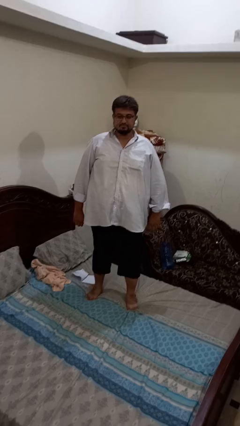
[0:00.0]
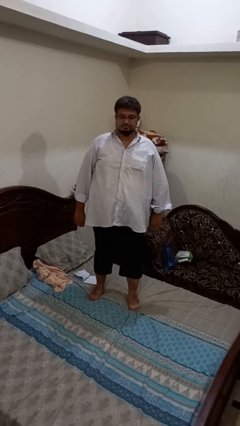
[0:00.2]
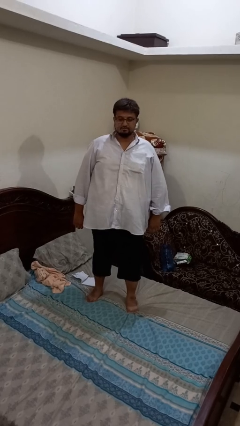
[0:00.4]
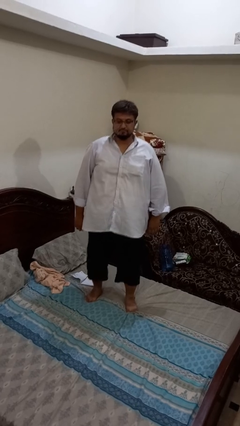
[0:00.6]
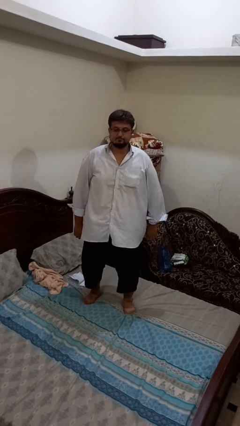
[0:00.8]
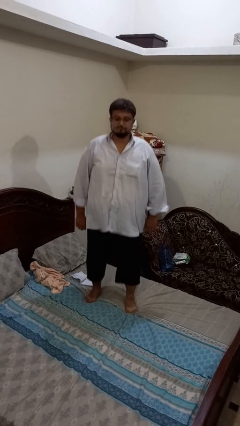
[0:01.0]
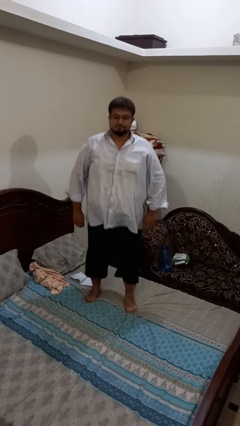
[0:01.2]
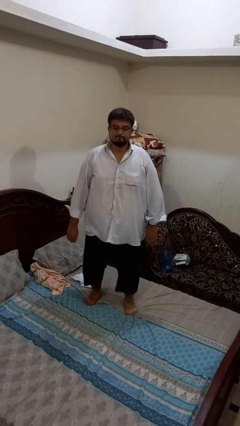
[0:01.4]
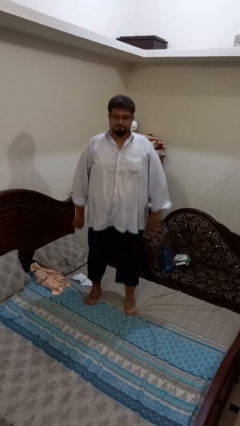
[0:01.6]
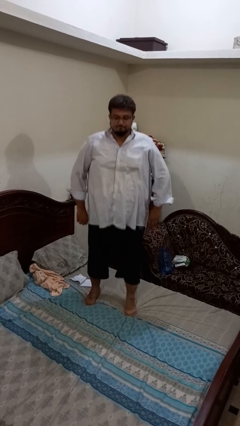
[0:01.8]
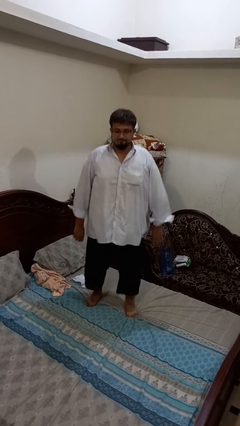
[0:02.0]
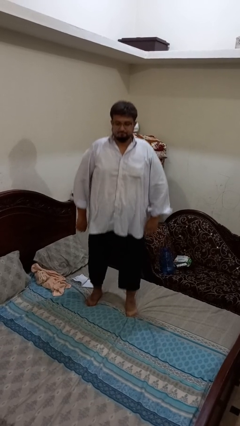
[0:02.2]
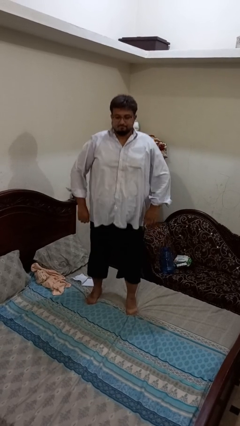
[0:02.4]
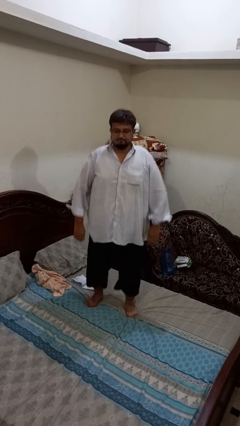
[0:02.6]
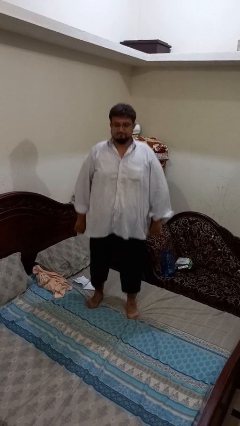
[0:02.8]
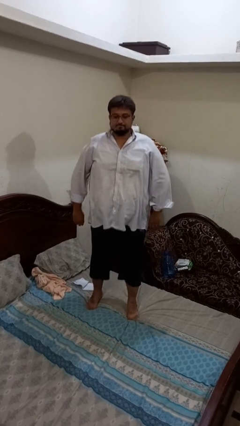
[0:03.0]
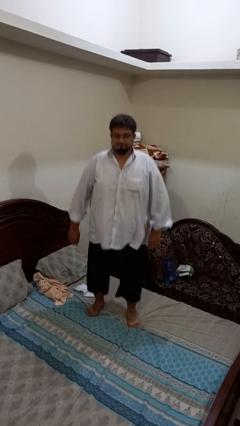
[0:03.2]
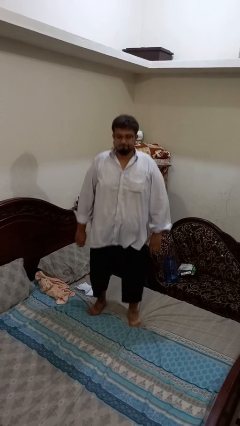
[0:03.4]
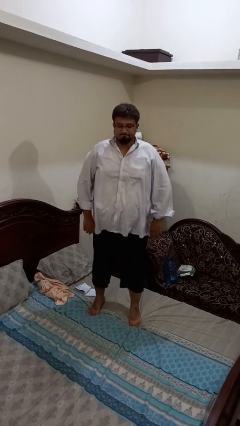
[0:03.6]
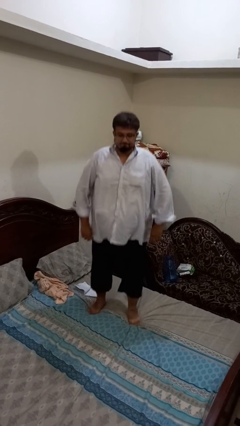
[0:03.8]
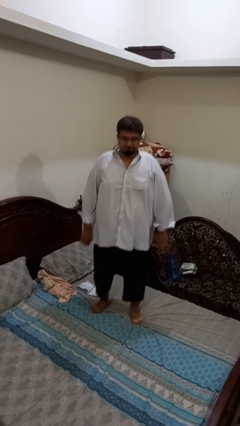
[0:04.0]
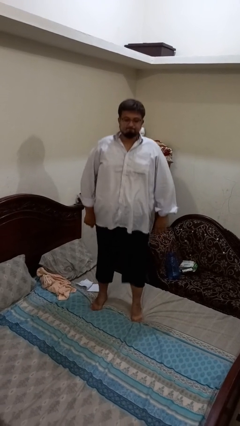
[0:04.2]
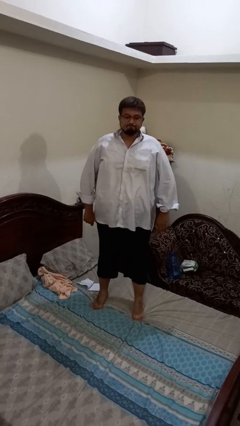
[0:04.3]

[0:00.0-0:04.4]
person jumps on bed

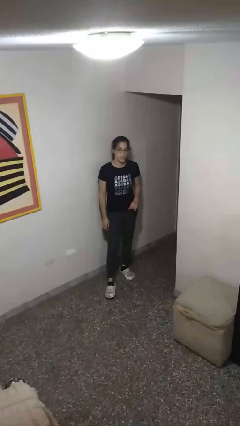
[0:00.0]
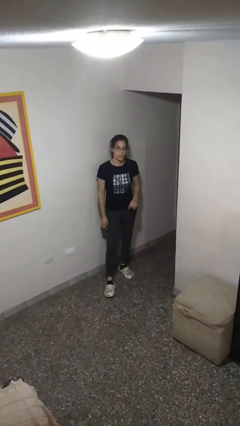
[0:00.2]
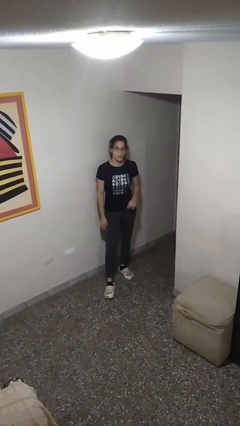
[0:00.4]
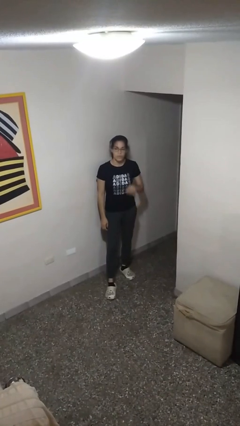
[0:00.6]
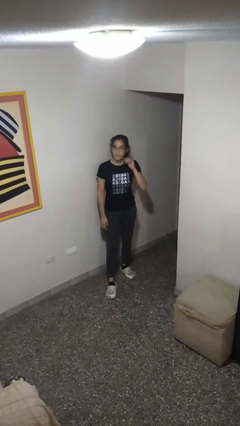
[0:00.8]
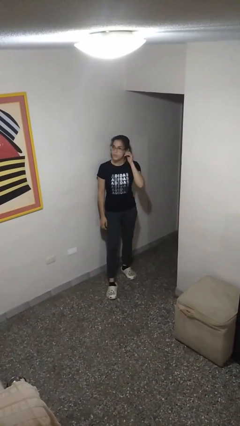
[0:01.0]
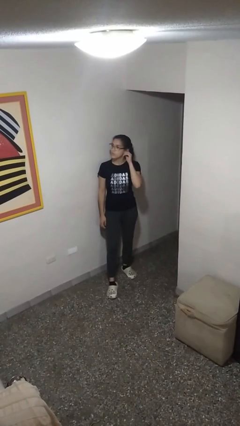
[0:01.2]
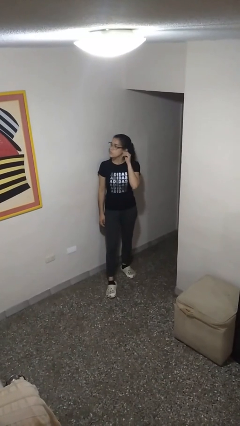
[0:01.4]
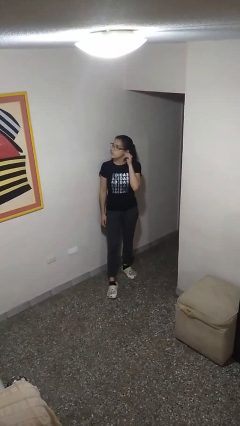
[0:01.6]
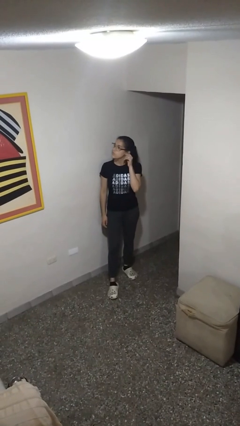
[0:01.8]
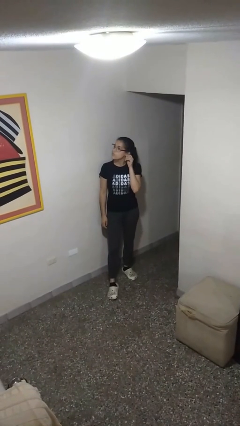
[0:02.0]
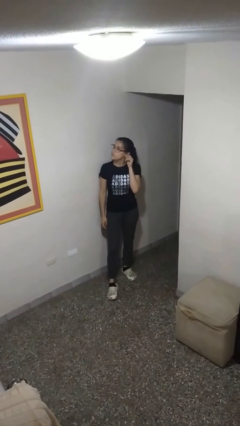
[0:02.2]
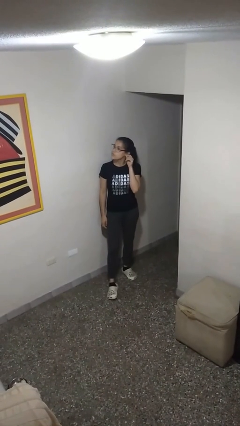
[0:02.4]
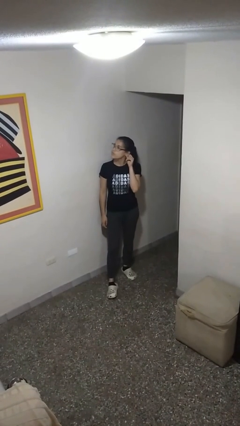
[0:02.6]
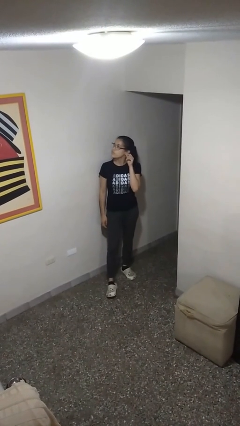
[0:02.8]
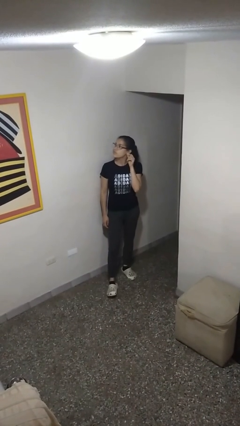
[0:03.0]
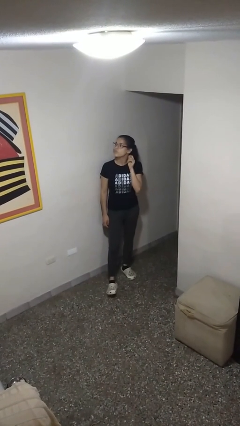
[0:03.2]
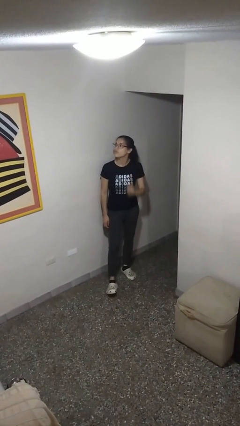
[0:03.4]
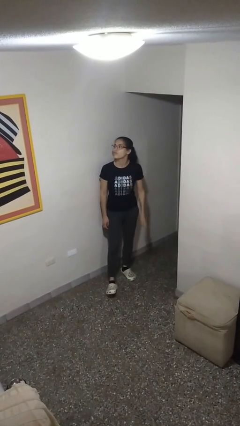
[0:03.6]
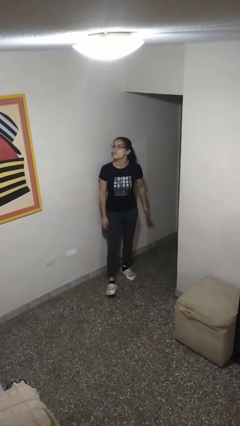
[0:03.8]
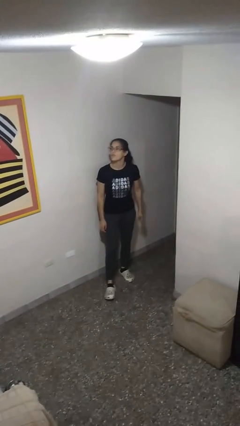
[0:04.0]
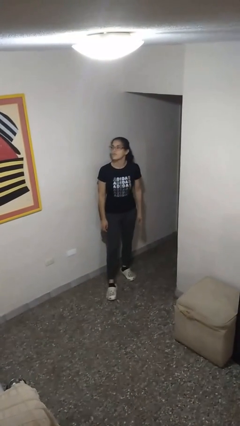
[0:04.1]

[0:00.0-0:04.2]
person touches earlobe

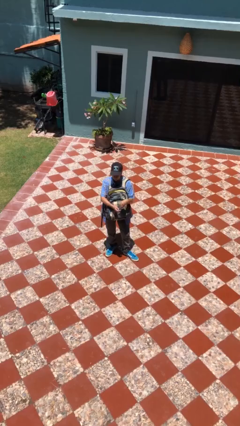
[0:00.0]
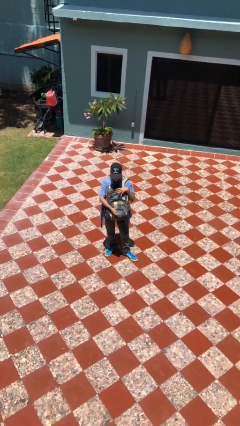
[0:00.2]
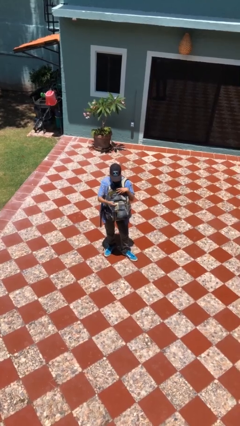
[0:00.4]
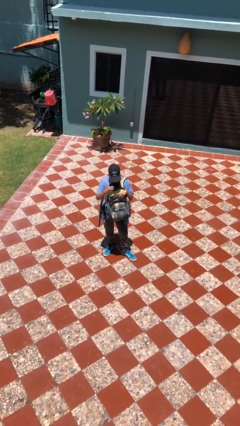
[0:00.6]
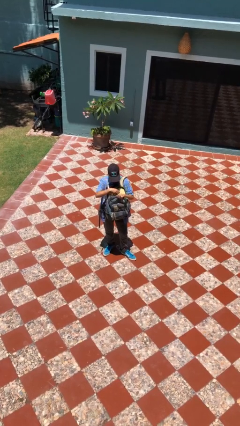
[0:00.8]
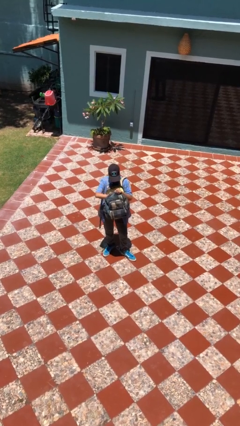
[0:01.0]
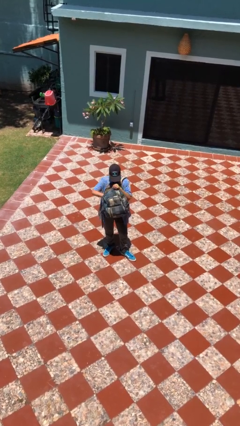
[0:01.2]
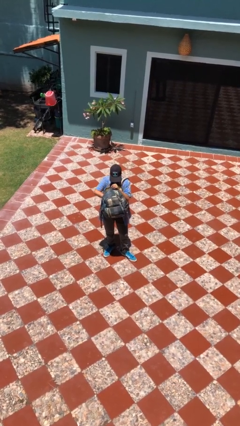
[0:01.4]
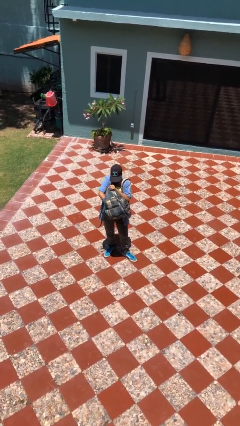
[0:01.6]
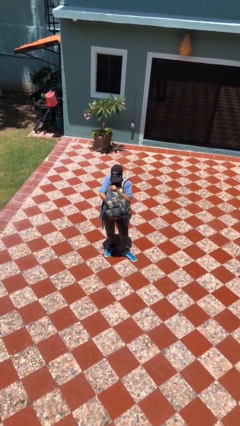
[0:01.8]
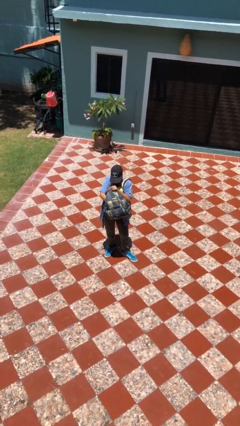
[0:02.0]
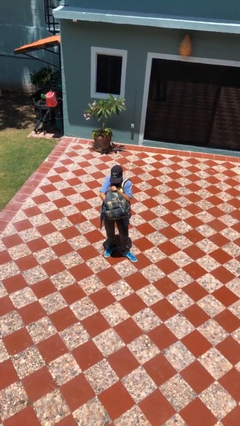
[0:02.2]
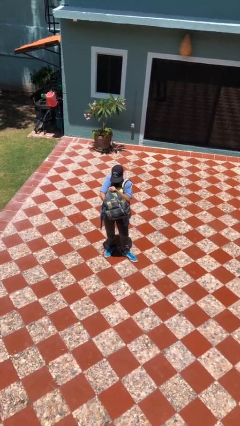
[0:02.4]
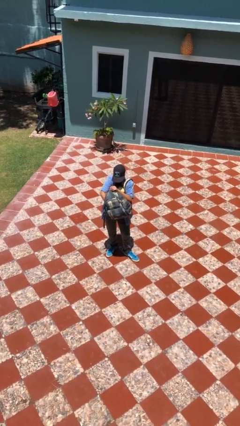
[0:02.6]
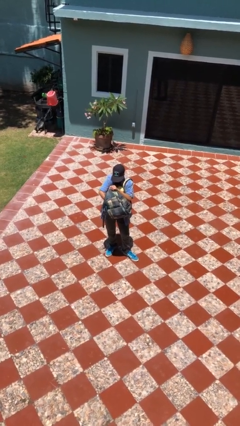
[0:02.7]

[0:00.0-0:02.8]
person searches in backpack

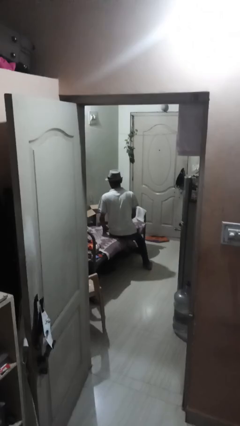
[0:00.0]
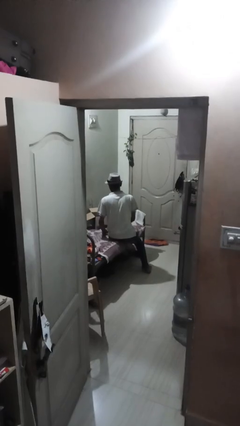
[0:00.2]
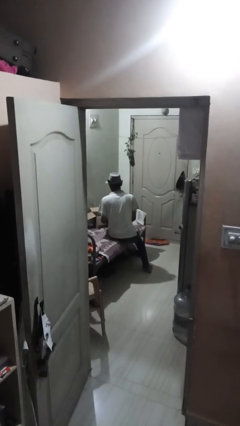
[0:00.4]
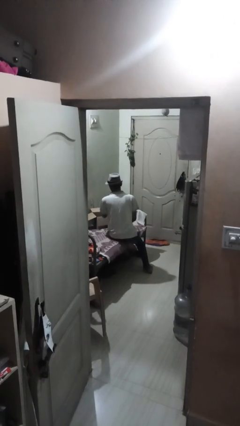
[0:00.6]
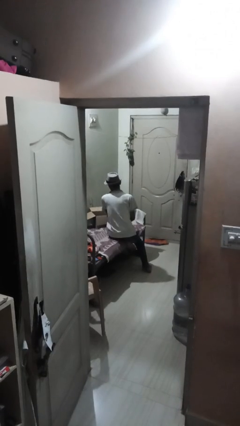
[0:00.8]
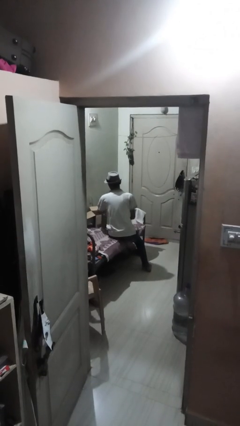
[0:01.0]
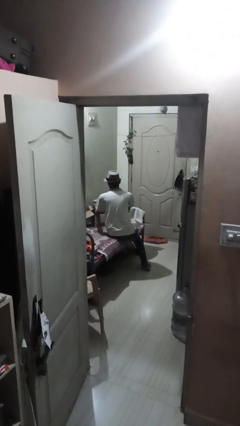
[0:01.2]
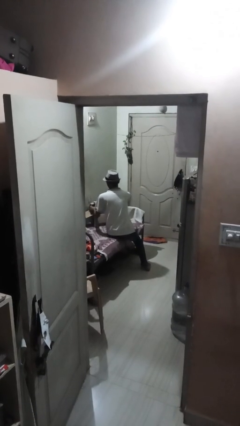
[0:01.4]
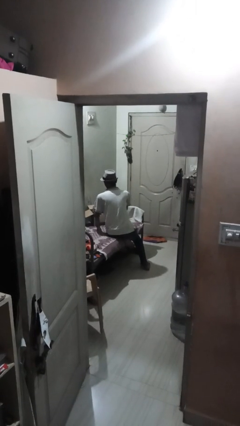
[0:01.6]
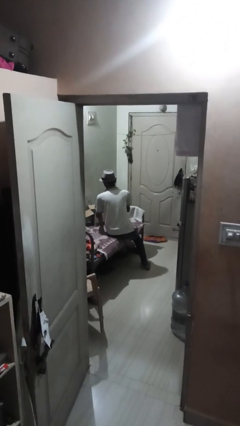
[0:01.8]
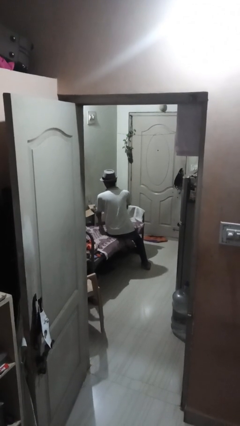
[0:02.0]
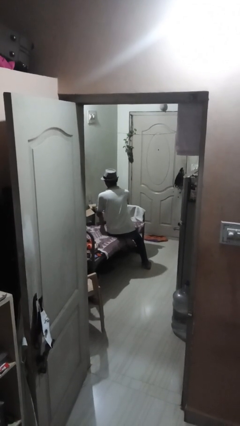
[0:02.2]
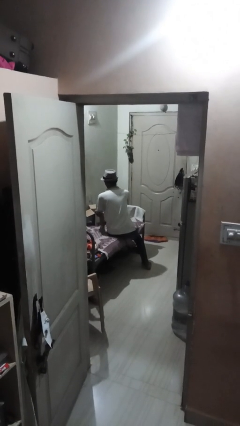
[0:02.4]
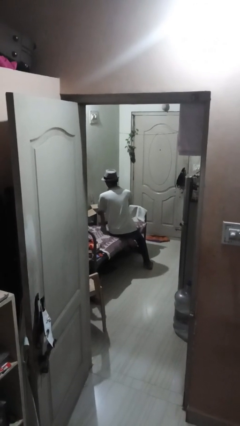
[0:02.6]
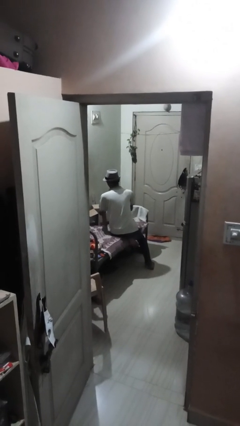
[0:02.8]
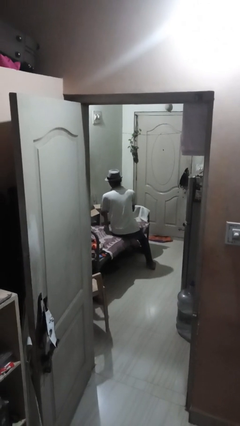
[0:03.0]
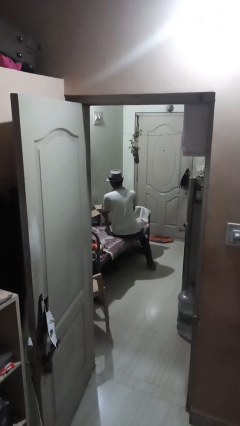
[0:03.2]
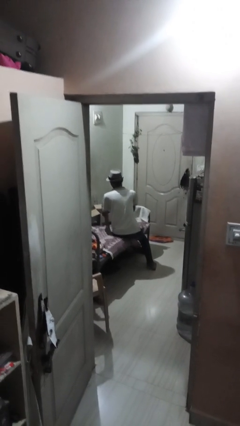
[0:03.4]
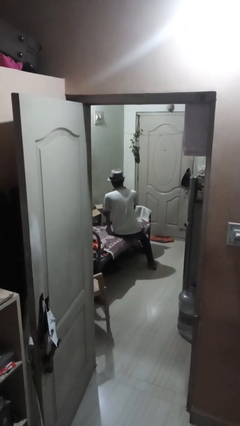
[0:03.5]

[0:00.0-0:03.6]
person searches in box

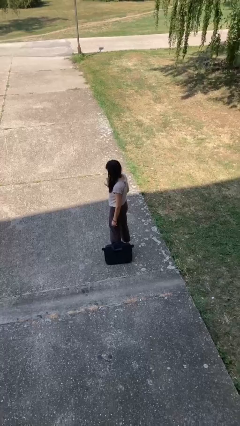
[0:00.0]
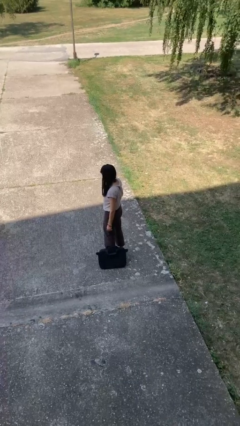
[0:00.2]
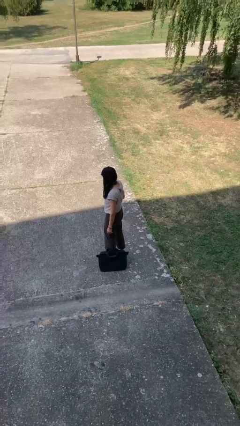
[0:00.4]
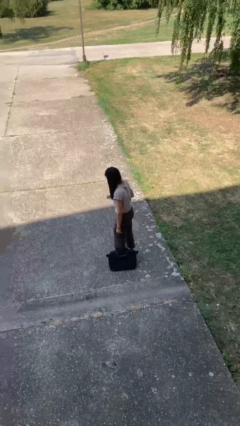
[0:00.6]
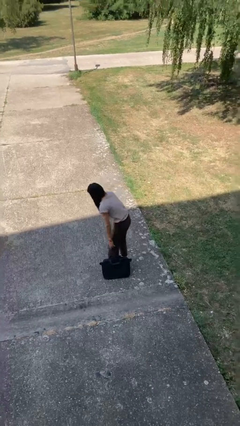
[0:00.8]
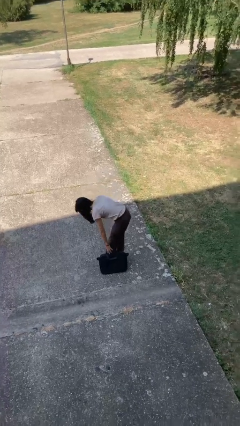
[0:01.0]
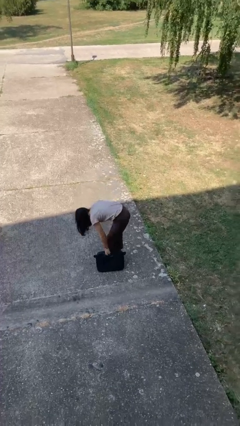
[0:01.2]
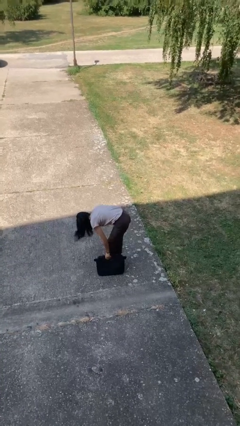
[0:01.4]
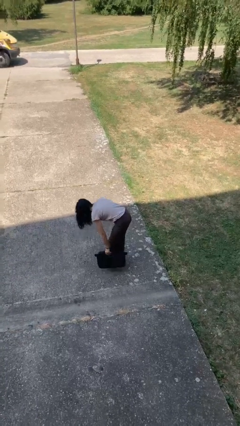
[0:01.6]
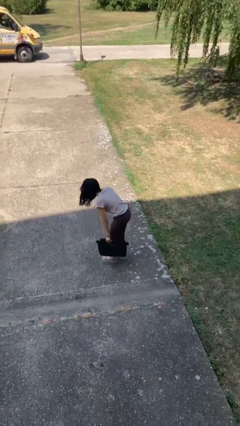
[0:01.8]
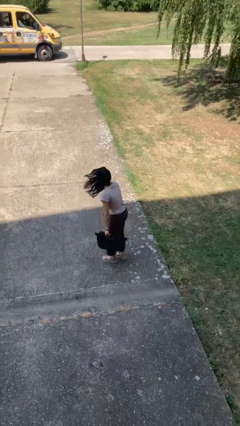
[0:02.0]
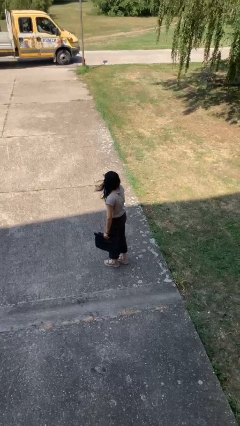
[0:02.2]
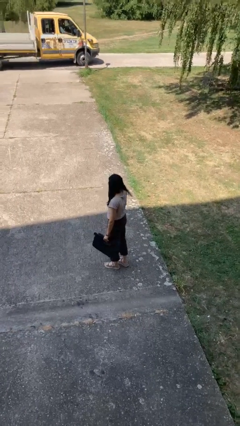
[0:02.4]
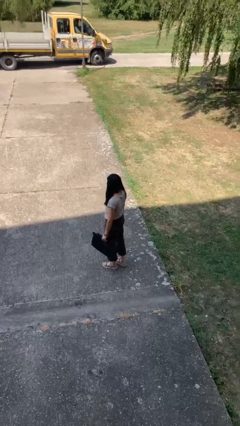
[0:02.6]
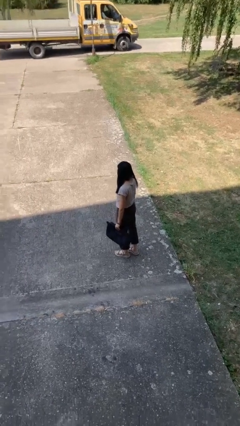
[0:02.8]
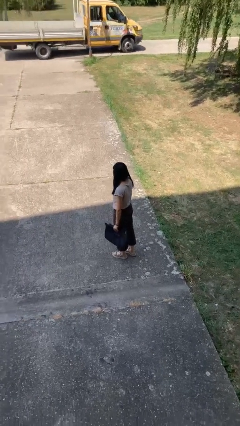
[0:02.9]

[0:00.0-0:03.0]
person picks up object from floor
